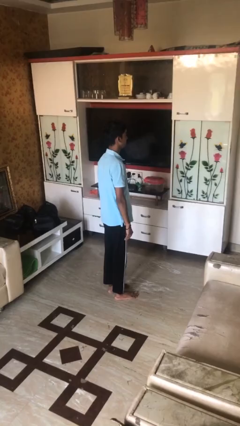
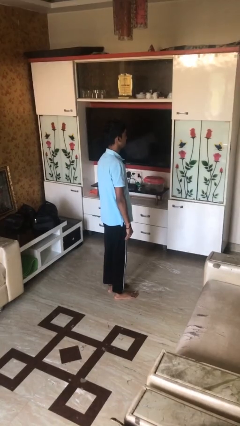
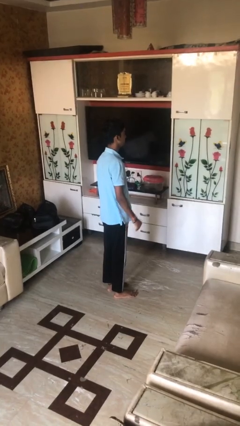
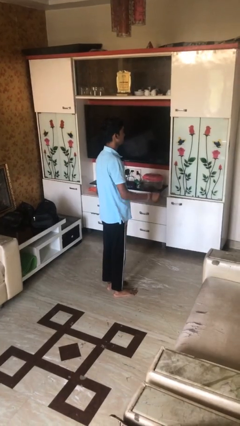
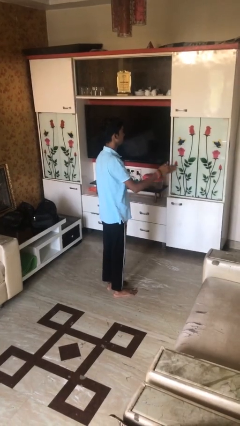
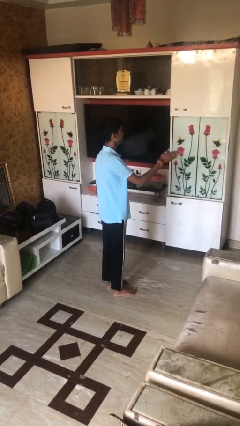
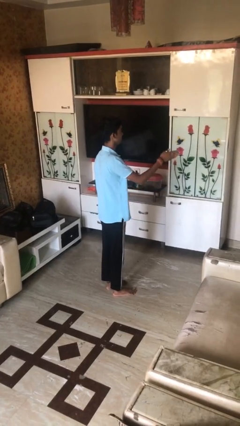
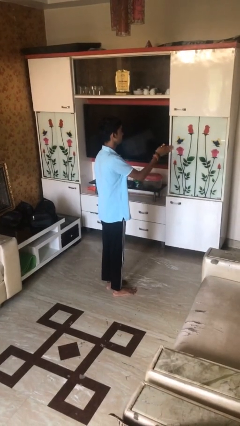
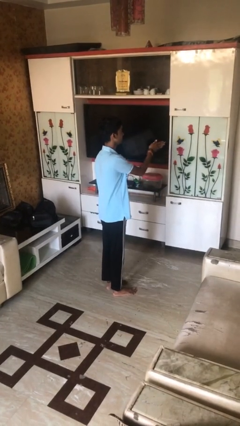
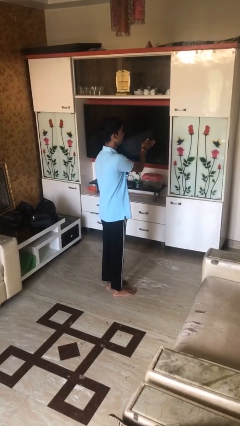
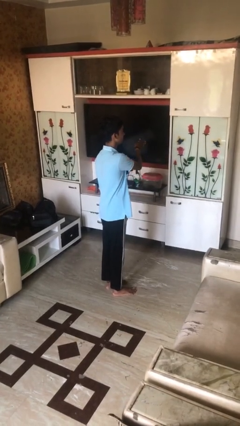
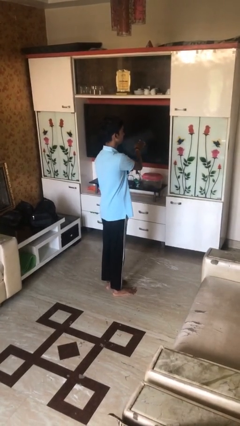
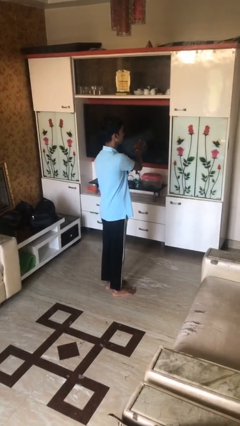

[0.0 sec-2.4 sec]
person gestures swipe left

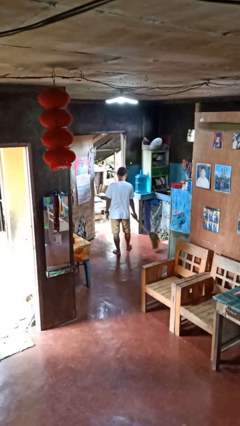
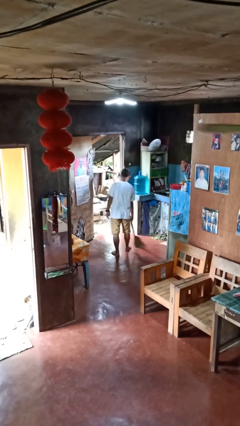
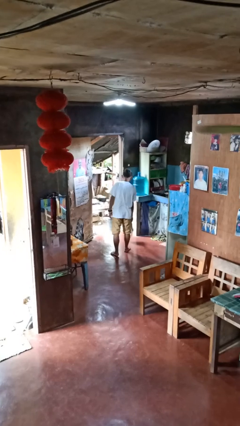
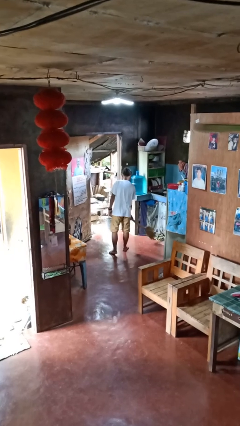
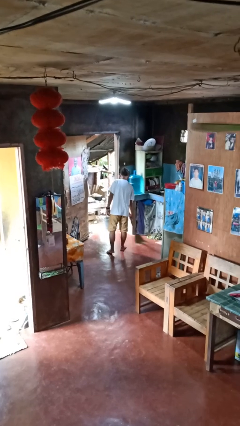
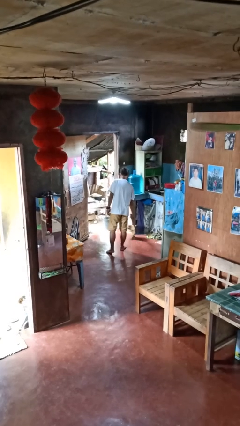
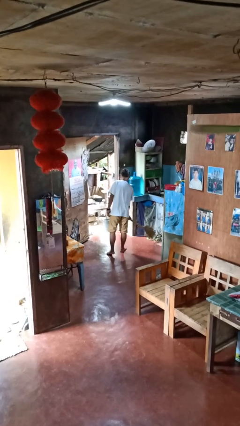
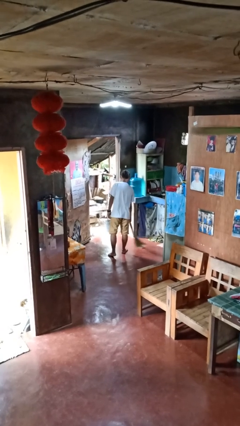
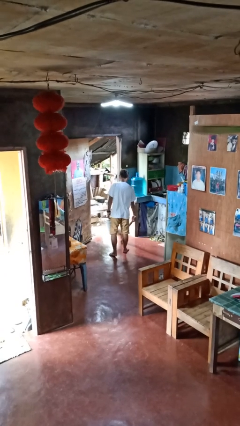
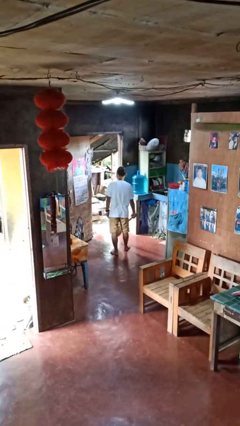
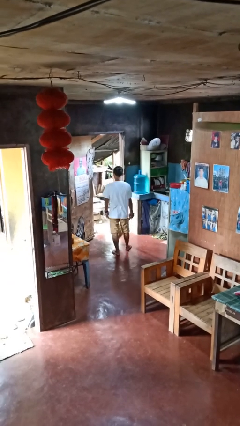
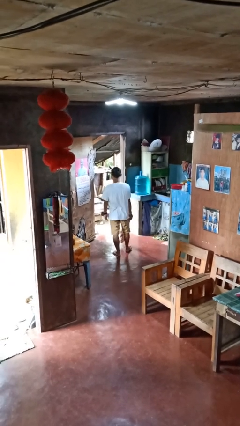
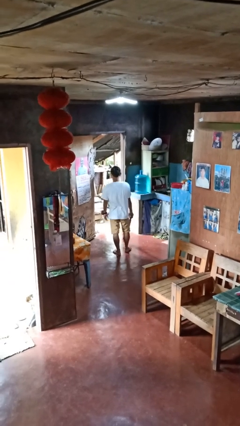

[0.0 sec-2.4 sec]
person sweeps floor

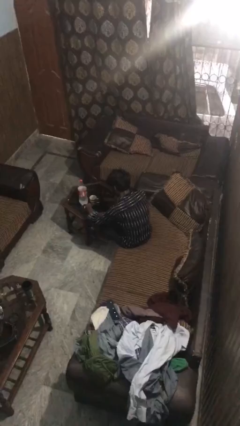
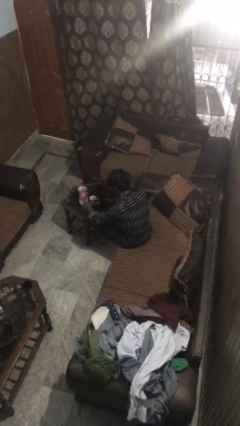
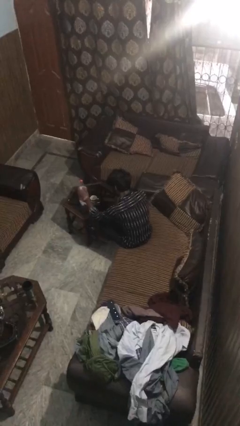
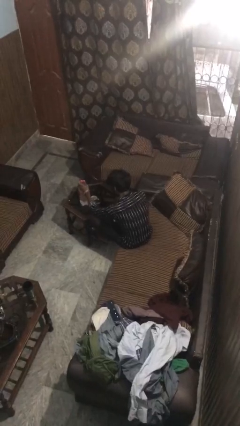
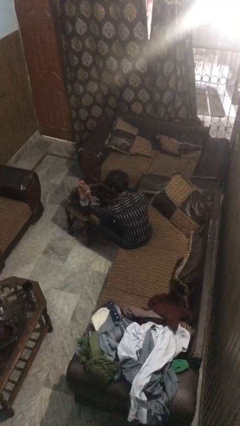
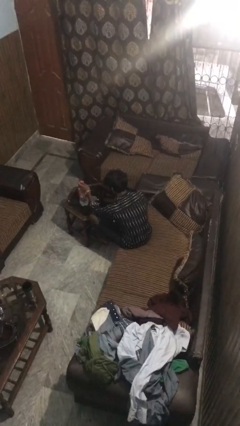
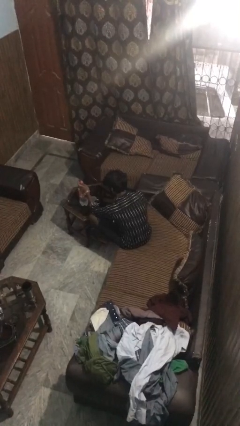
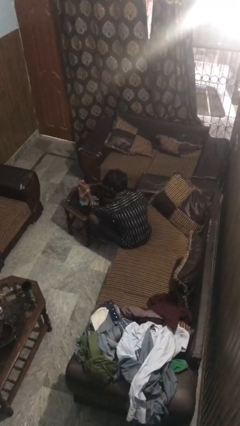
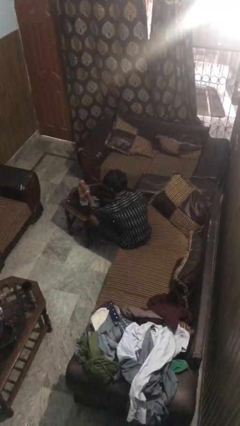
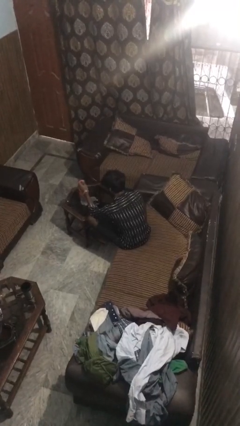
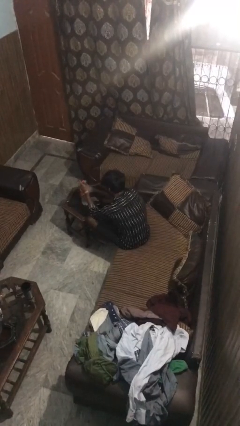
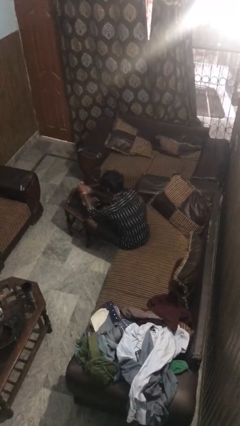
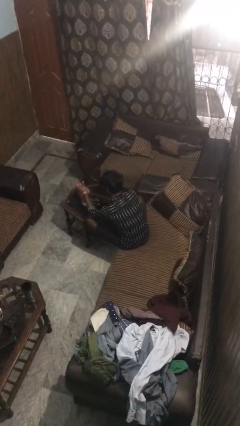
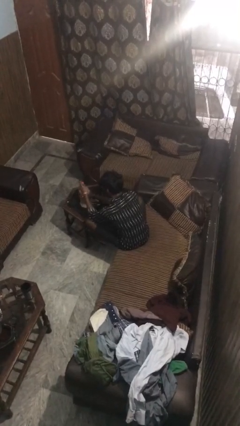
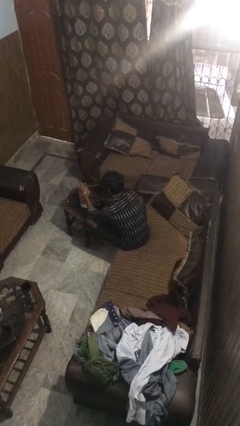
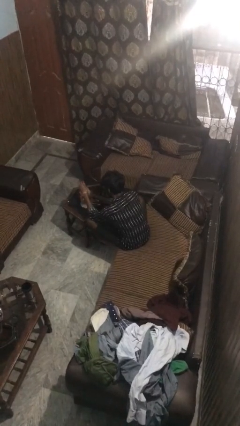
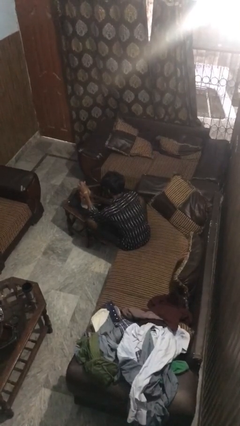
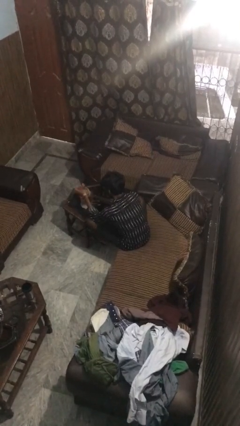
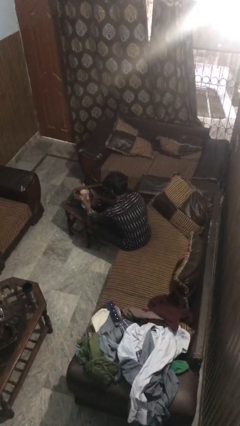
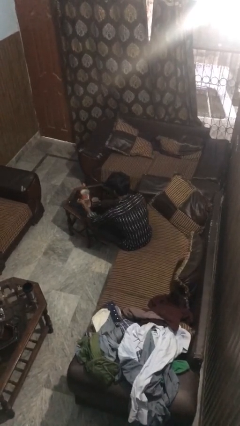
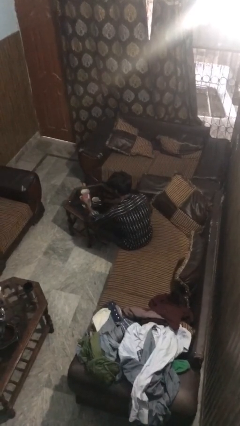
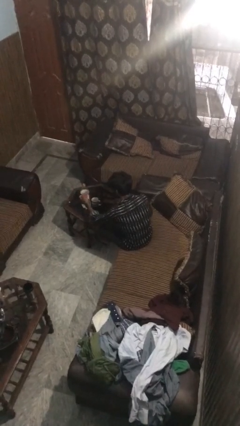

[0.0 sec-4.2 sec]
person unscrews lid from bottle

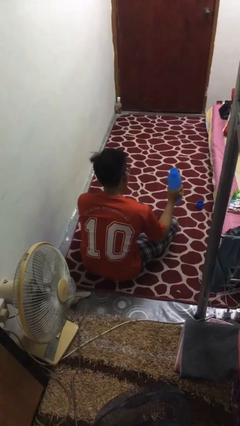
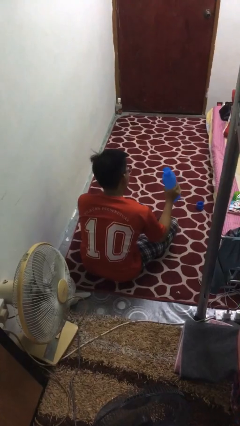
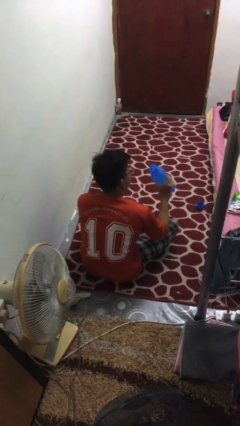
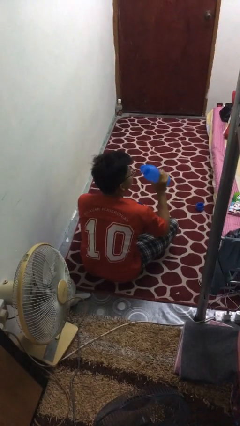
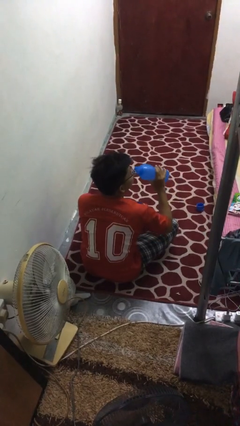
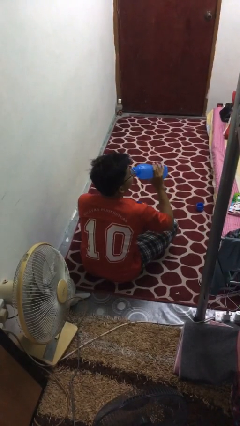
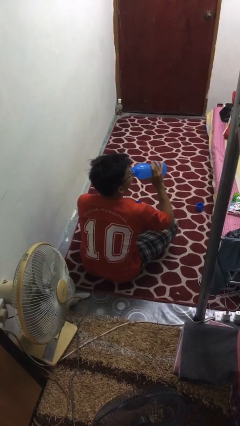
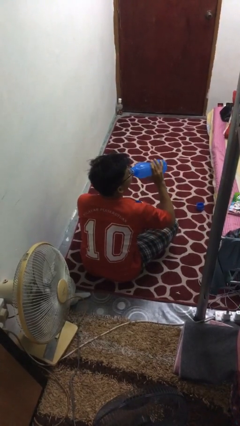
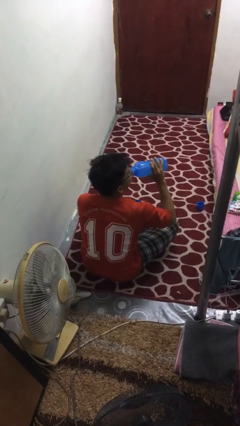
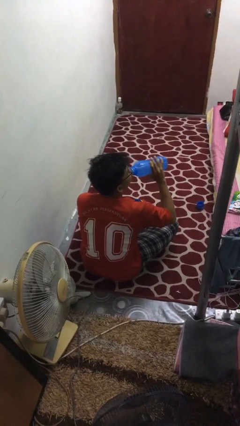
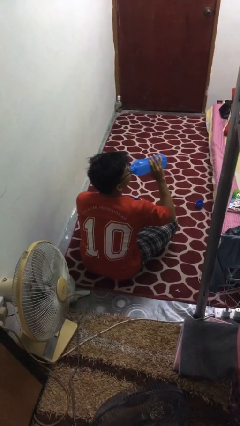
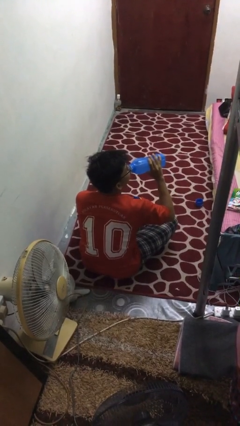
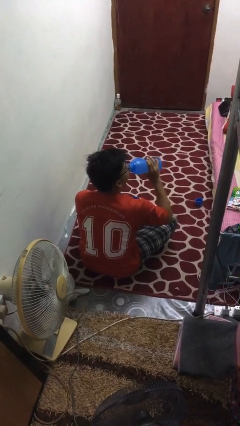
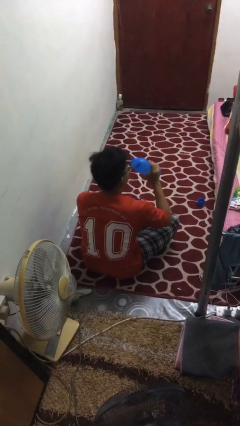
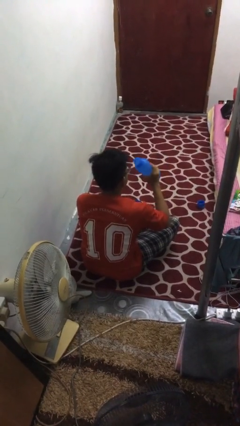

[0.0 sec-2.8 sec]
person drinks from bottle

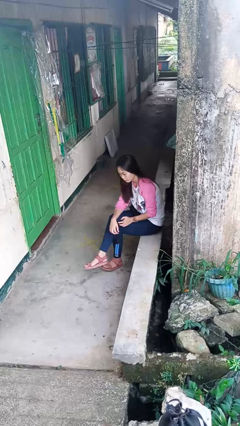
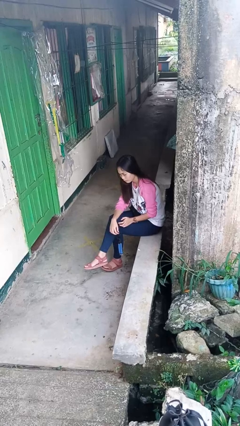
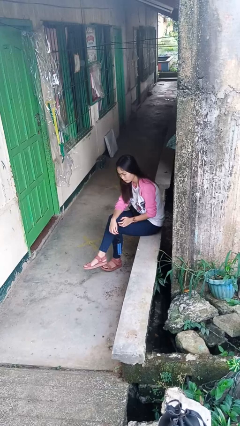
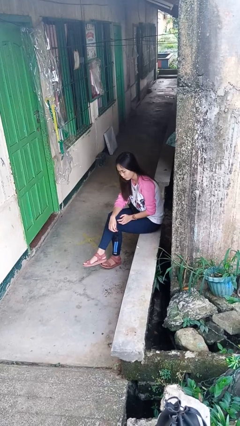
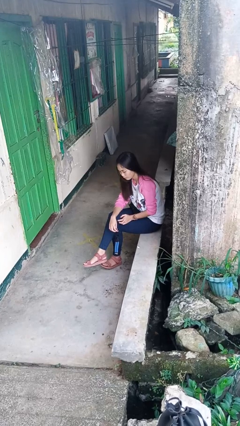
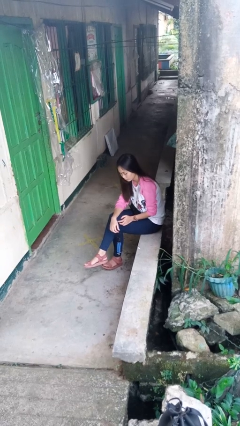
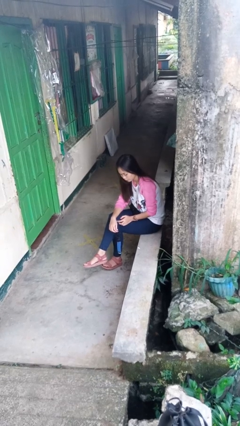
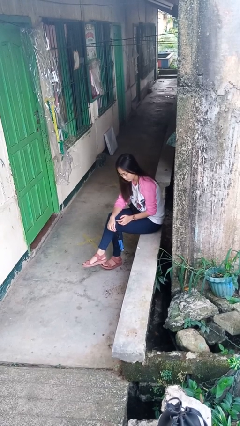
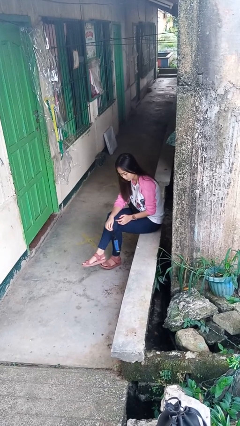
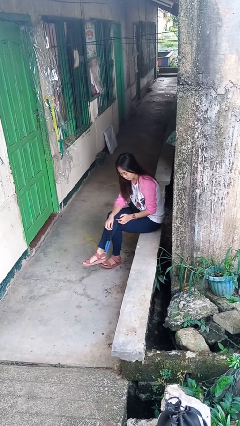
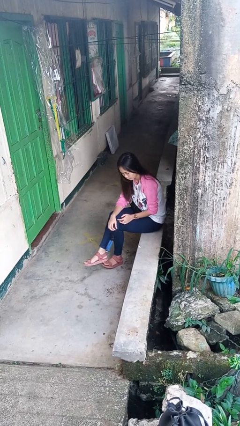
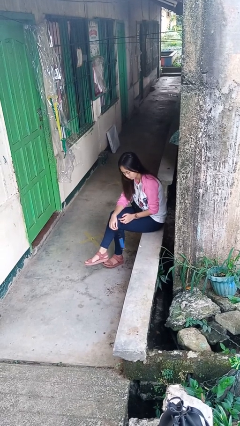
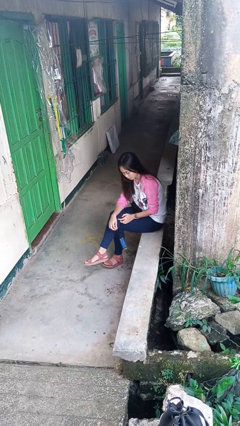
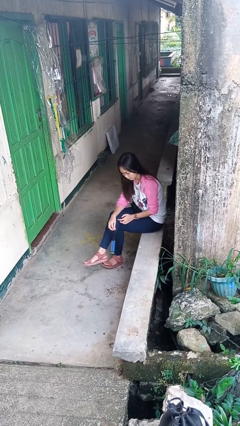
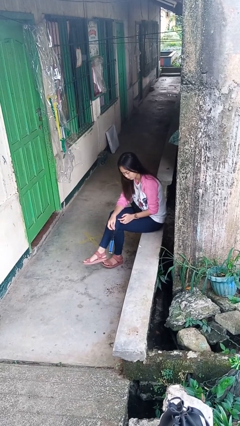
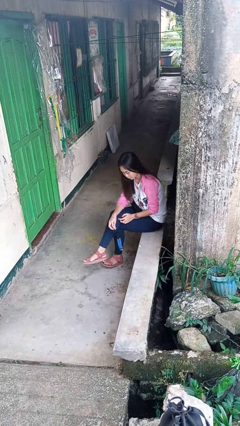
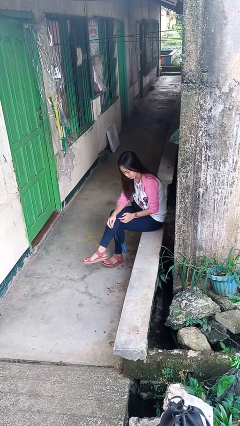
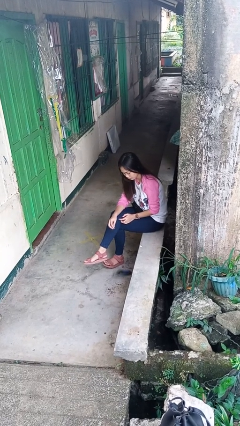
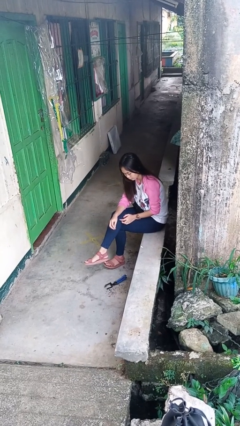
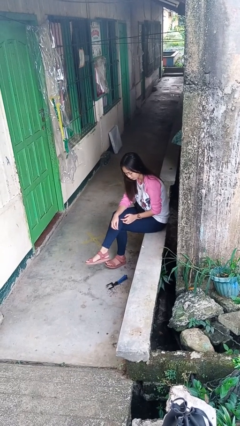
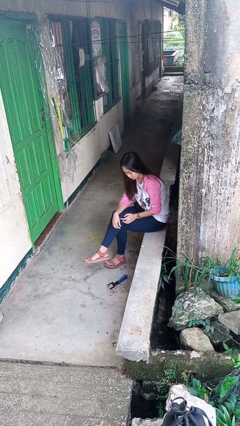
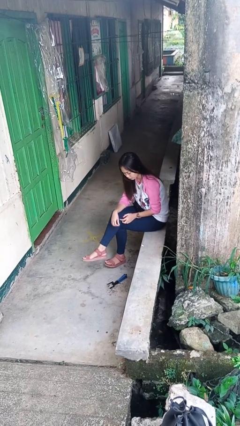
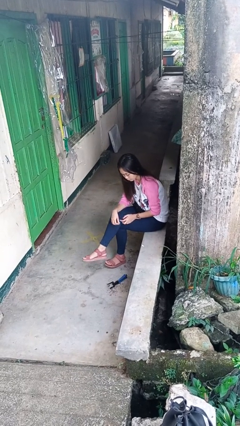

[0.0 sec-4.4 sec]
person drops object

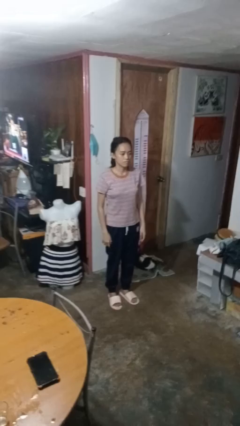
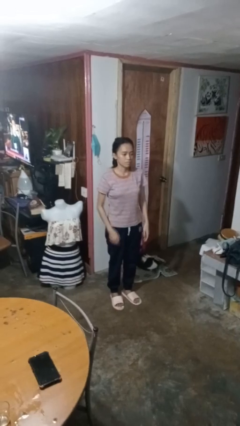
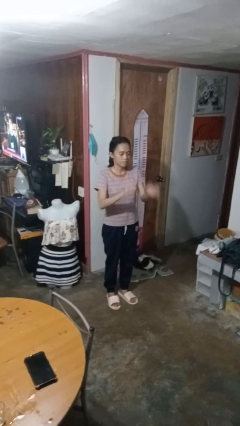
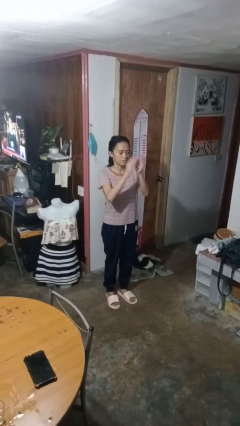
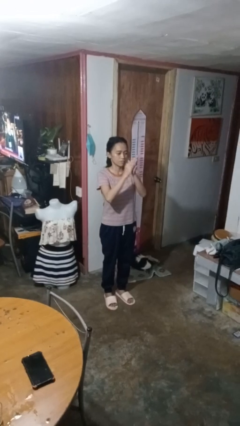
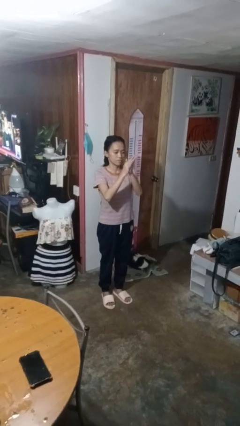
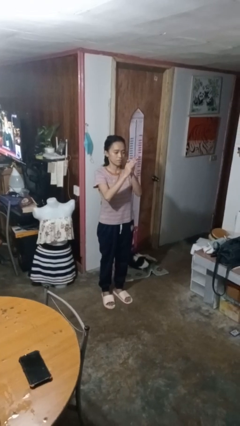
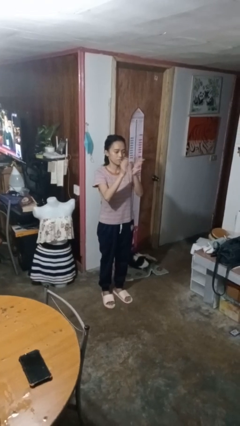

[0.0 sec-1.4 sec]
person claps hands
